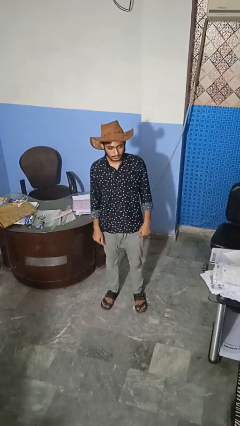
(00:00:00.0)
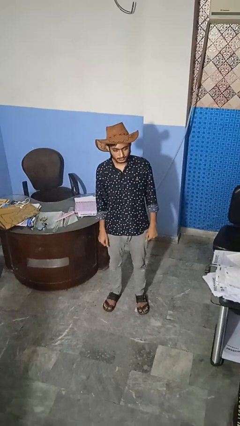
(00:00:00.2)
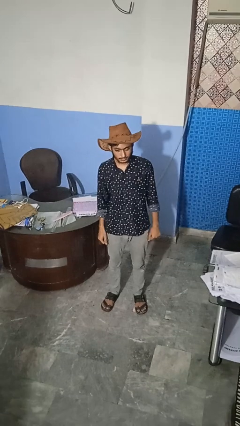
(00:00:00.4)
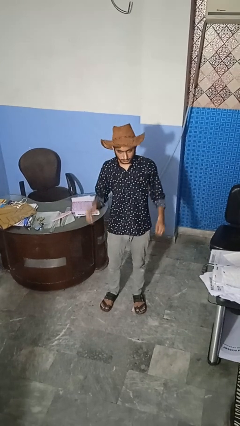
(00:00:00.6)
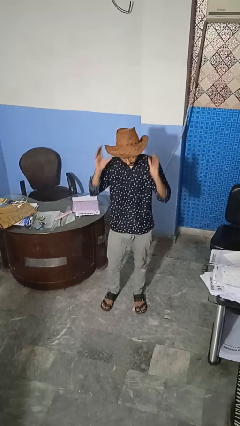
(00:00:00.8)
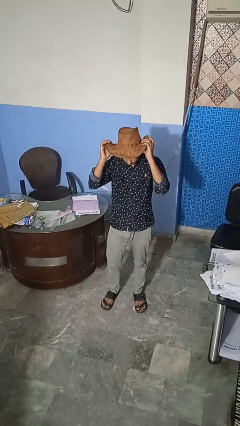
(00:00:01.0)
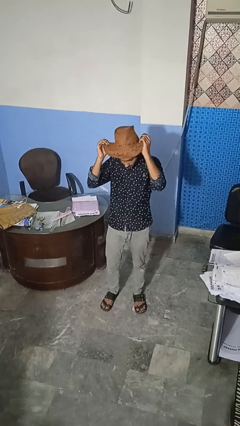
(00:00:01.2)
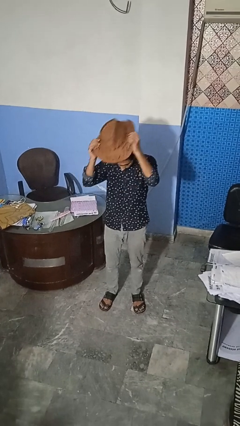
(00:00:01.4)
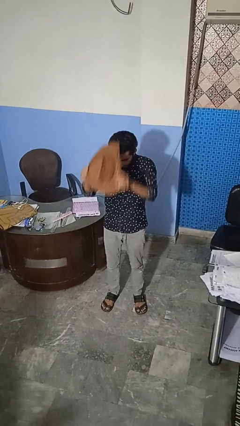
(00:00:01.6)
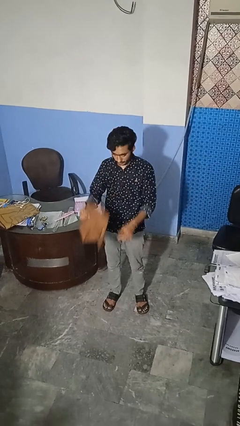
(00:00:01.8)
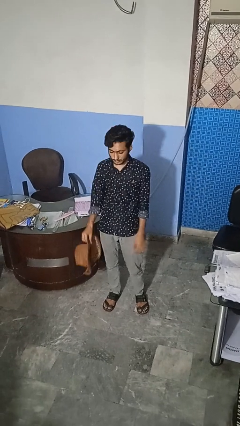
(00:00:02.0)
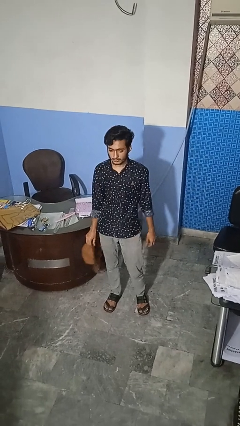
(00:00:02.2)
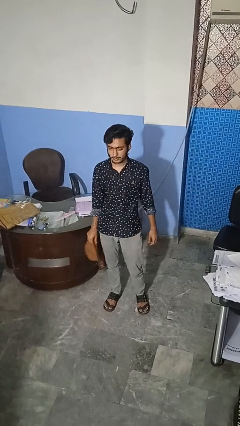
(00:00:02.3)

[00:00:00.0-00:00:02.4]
person takes off hat

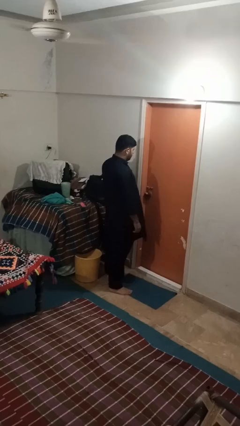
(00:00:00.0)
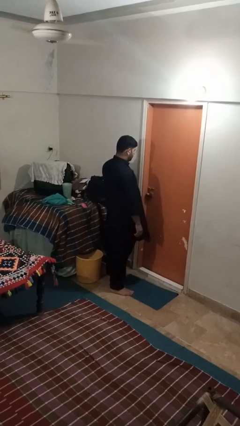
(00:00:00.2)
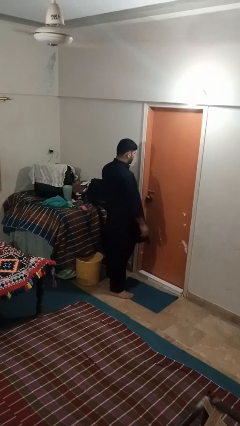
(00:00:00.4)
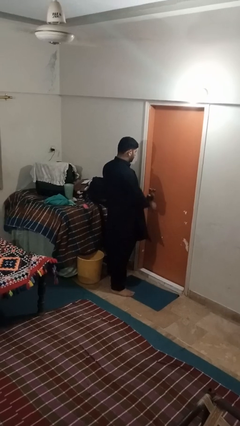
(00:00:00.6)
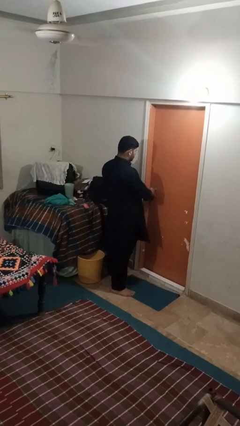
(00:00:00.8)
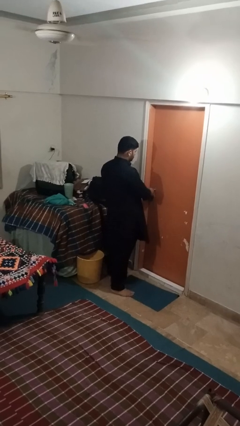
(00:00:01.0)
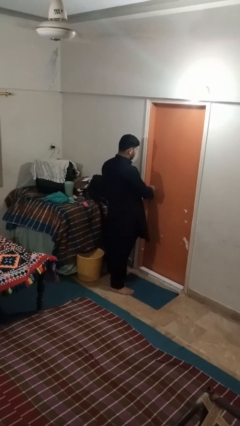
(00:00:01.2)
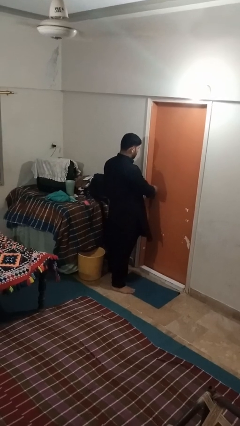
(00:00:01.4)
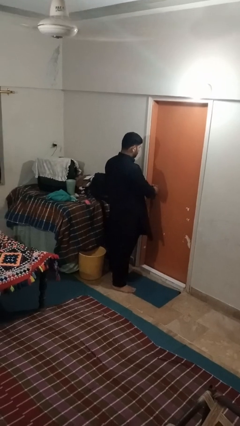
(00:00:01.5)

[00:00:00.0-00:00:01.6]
person unlocks door with keys

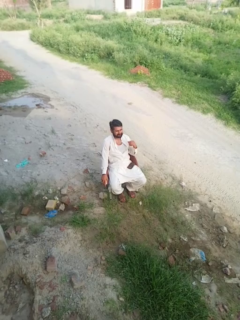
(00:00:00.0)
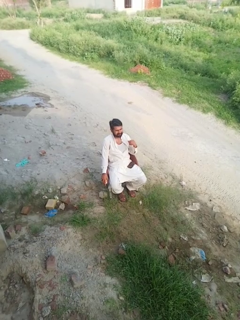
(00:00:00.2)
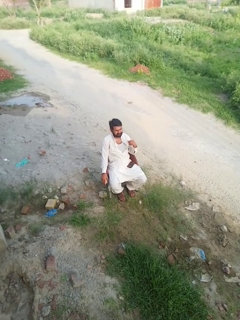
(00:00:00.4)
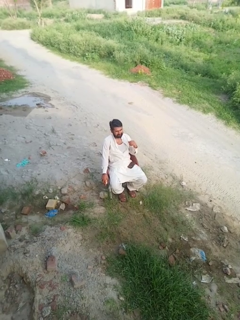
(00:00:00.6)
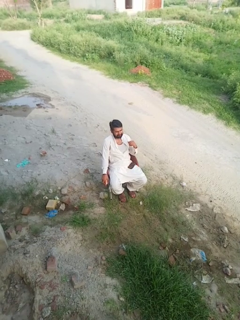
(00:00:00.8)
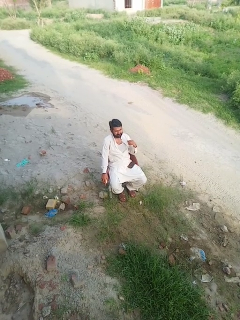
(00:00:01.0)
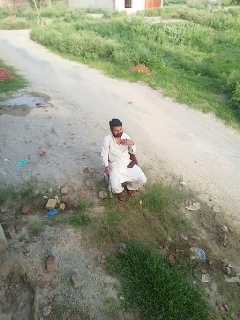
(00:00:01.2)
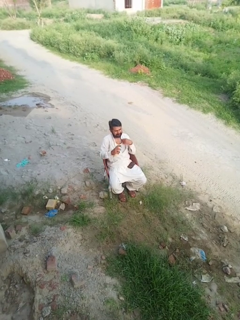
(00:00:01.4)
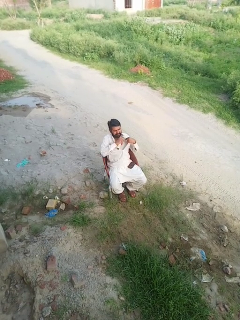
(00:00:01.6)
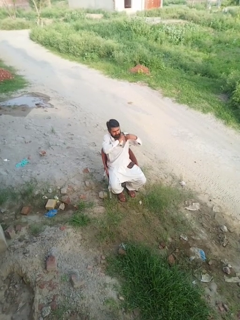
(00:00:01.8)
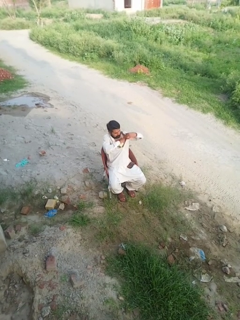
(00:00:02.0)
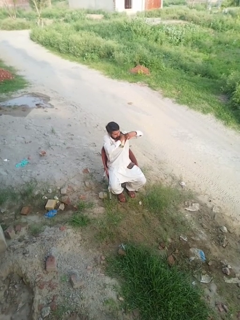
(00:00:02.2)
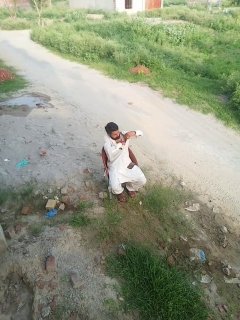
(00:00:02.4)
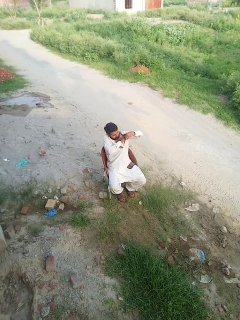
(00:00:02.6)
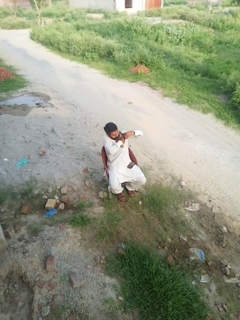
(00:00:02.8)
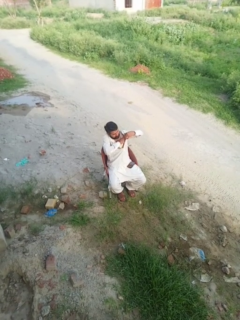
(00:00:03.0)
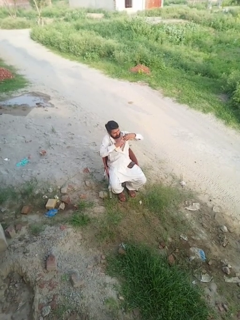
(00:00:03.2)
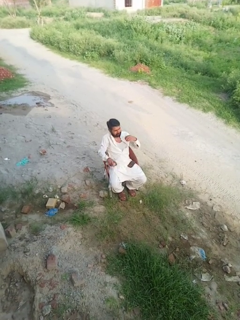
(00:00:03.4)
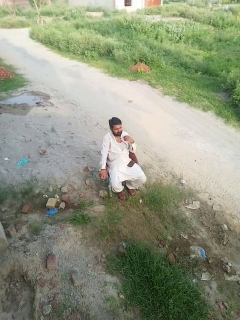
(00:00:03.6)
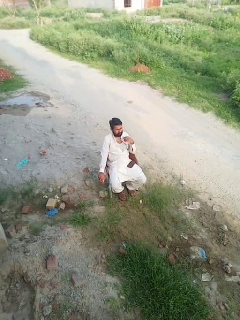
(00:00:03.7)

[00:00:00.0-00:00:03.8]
person applies deodorant

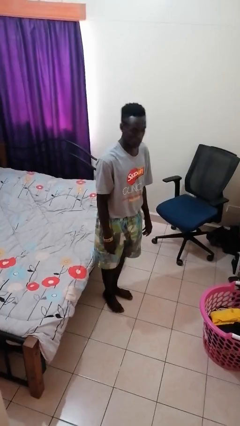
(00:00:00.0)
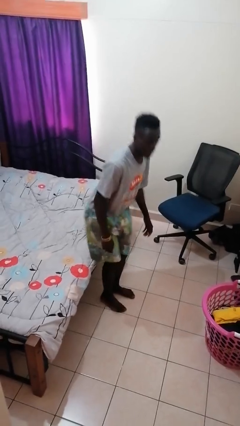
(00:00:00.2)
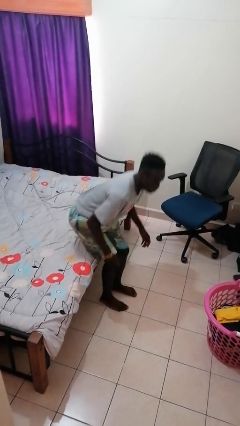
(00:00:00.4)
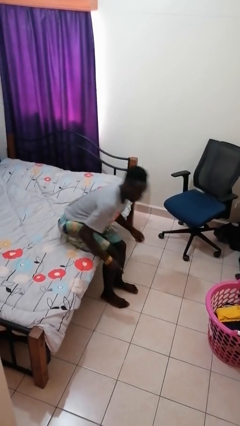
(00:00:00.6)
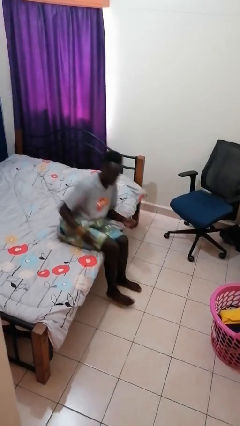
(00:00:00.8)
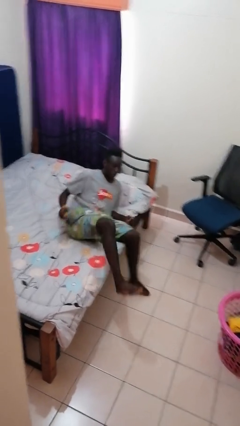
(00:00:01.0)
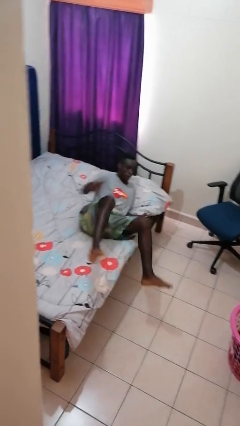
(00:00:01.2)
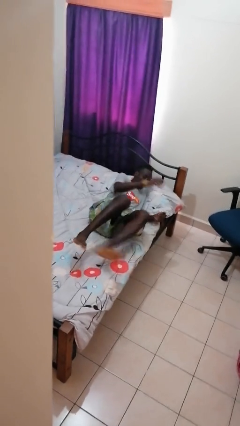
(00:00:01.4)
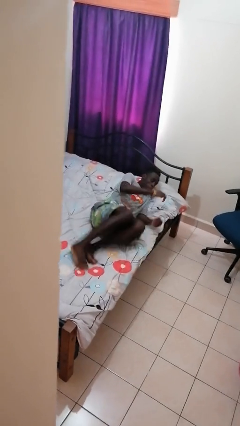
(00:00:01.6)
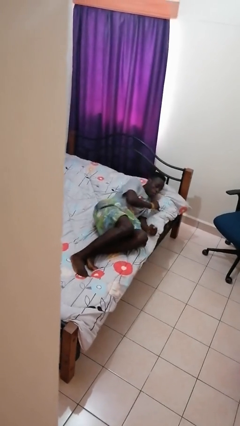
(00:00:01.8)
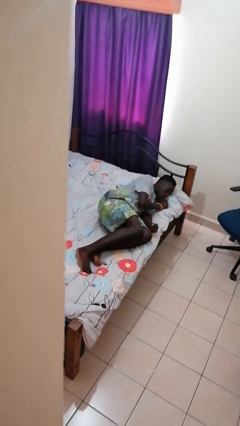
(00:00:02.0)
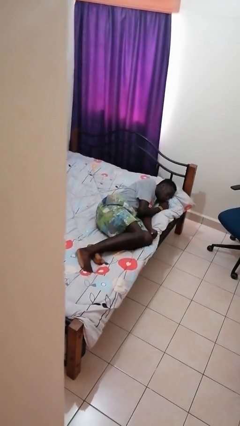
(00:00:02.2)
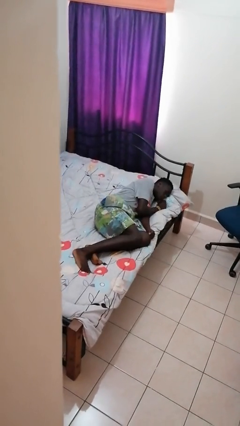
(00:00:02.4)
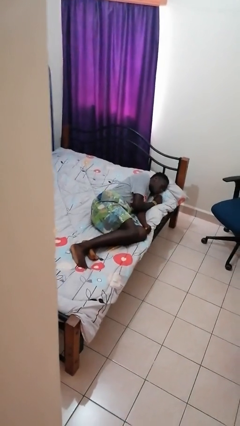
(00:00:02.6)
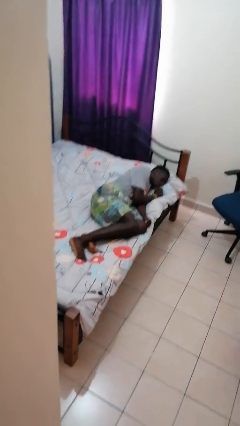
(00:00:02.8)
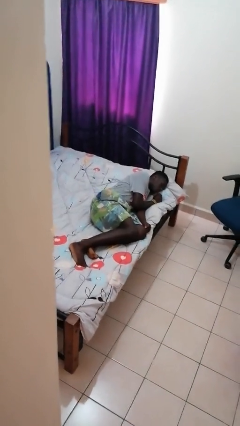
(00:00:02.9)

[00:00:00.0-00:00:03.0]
person lies down on bed

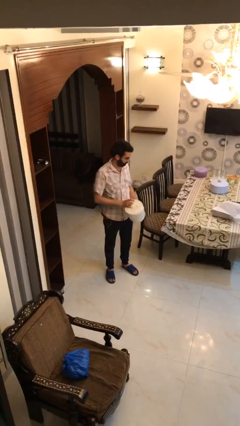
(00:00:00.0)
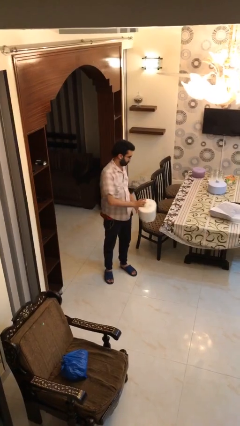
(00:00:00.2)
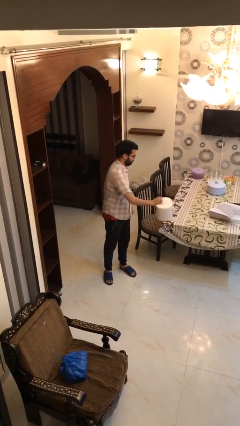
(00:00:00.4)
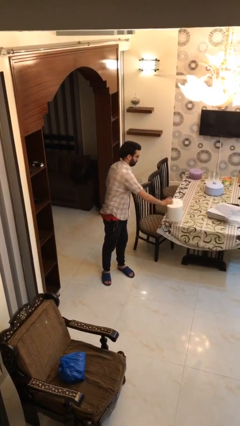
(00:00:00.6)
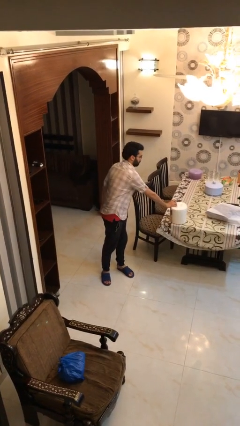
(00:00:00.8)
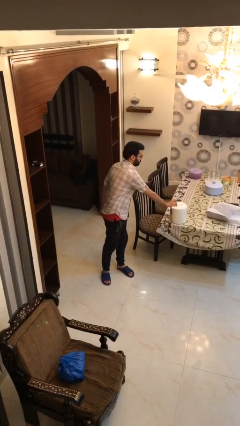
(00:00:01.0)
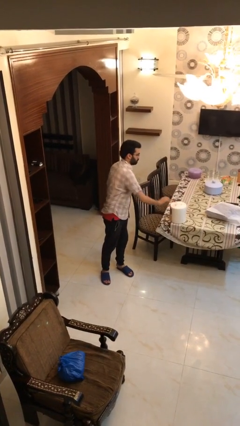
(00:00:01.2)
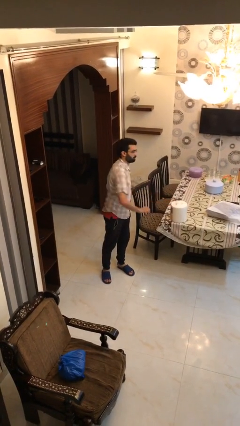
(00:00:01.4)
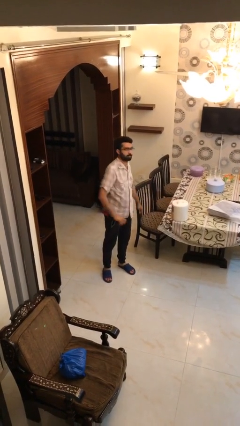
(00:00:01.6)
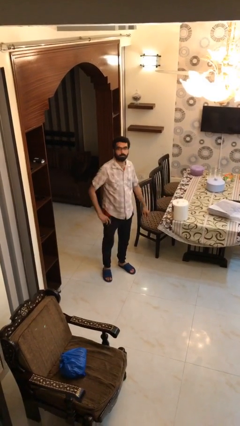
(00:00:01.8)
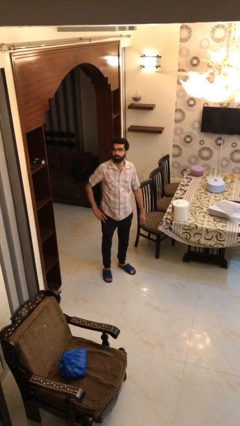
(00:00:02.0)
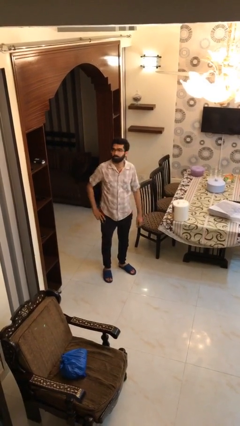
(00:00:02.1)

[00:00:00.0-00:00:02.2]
person puts down object on table

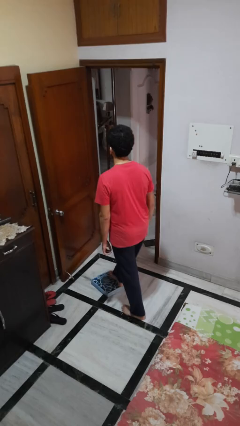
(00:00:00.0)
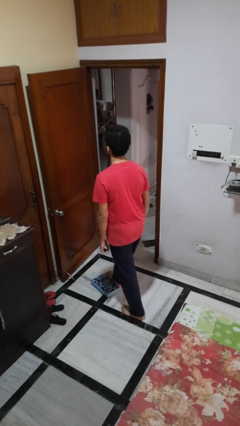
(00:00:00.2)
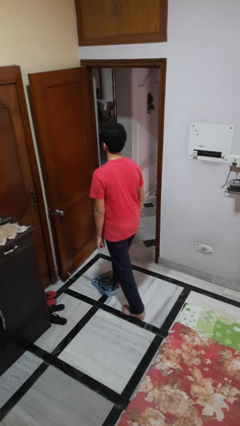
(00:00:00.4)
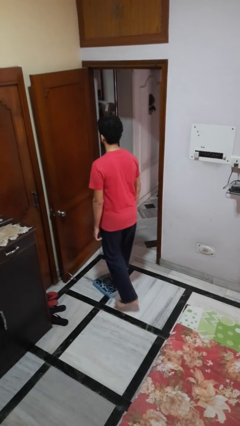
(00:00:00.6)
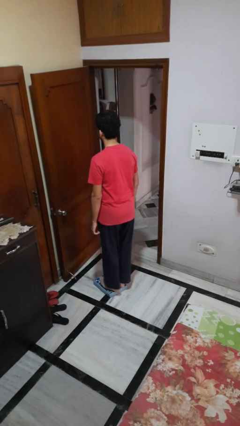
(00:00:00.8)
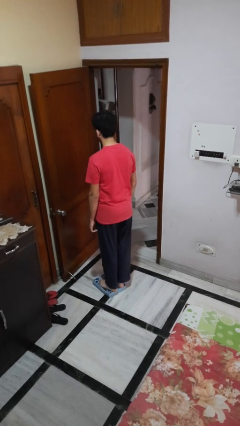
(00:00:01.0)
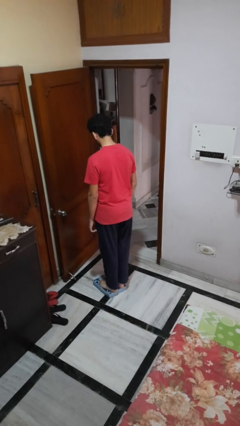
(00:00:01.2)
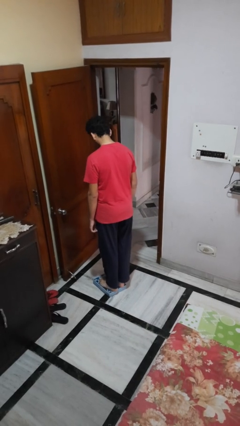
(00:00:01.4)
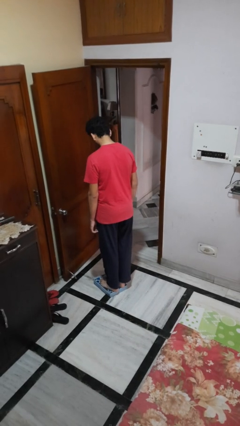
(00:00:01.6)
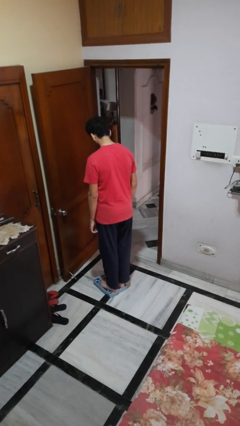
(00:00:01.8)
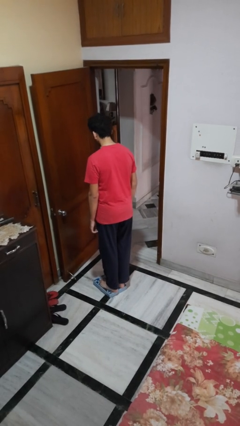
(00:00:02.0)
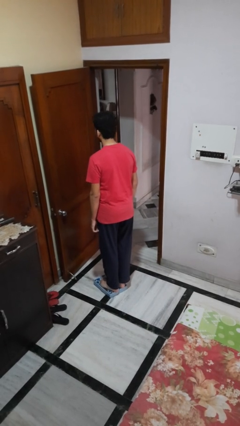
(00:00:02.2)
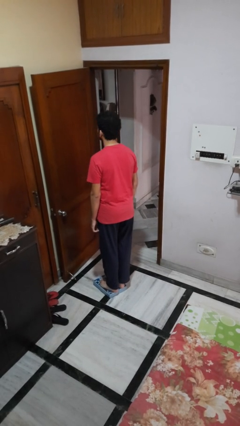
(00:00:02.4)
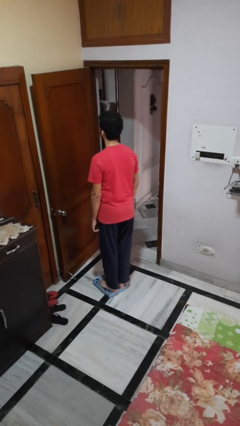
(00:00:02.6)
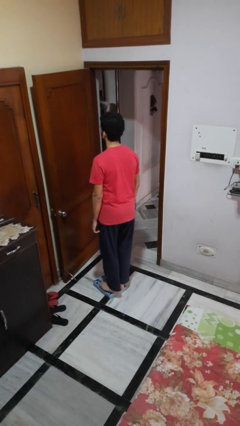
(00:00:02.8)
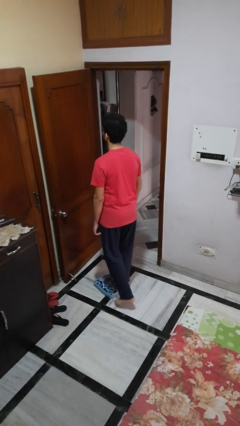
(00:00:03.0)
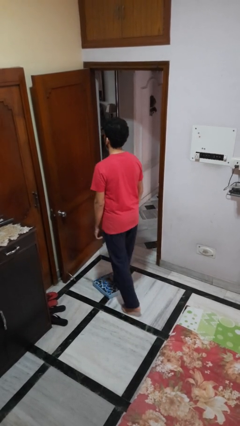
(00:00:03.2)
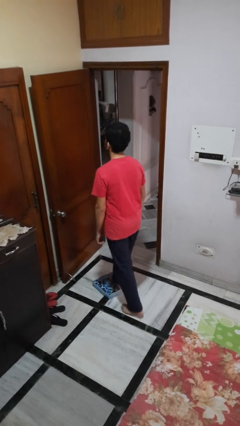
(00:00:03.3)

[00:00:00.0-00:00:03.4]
person uses bodyweight scale

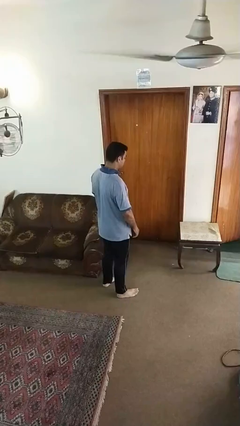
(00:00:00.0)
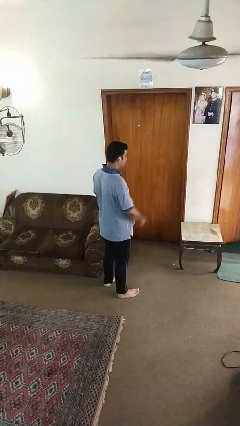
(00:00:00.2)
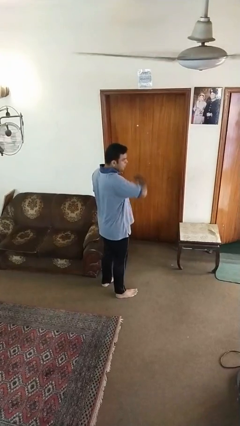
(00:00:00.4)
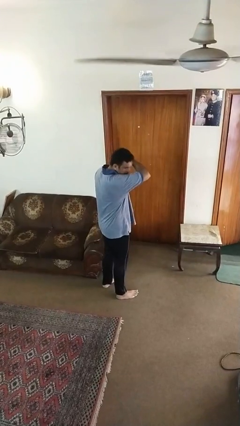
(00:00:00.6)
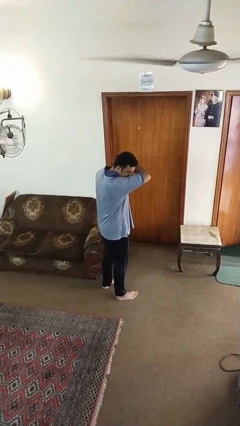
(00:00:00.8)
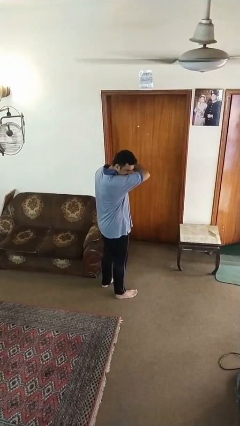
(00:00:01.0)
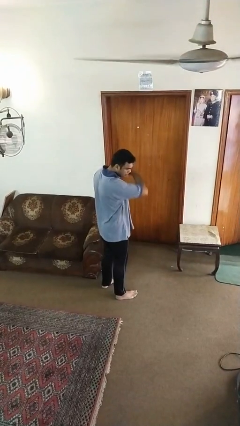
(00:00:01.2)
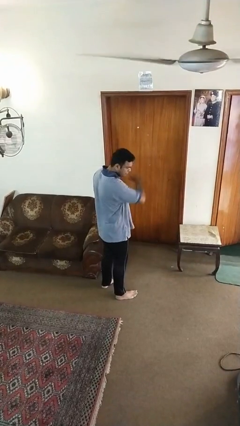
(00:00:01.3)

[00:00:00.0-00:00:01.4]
person sneezes into arm
